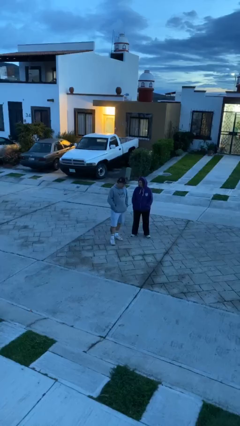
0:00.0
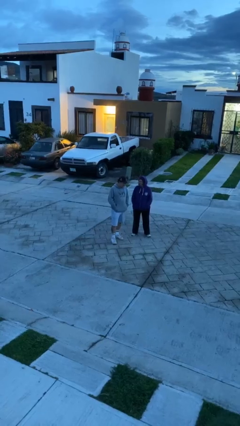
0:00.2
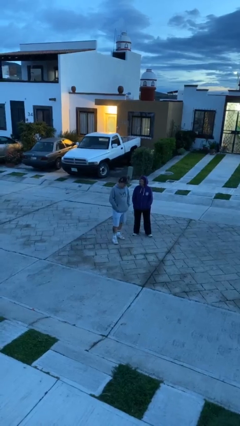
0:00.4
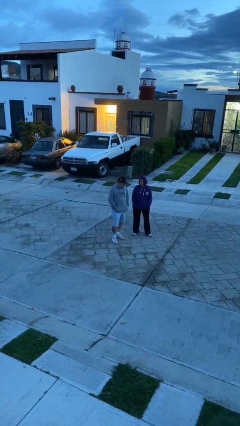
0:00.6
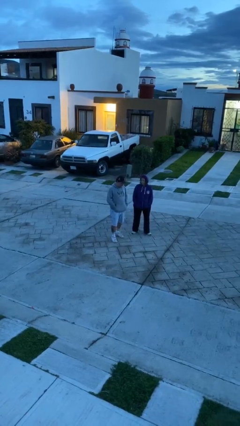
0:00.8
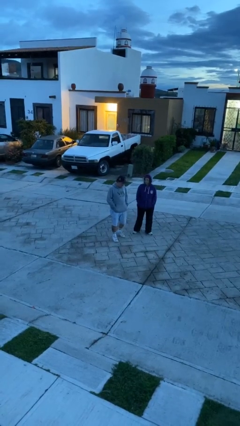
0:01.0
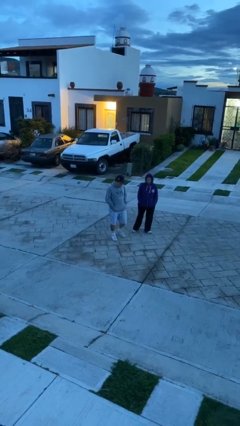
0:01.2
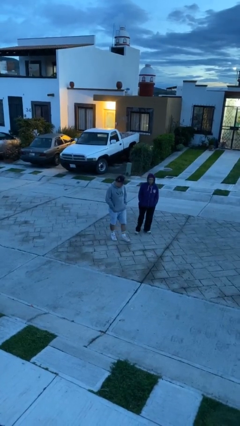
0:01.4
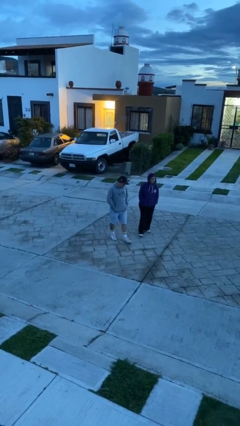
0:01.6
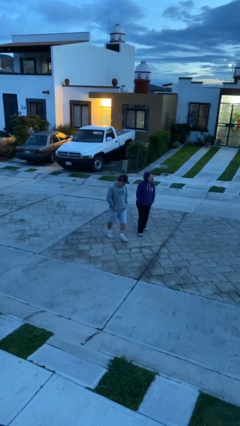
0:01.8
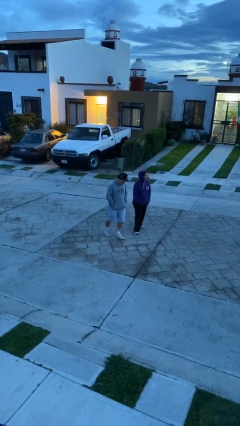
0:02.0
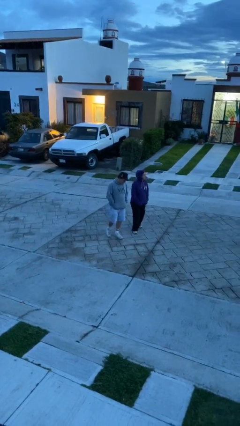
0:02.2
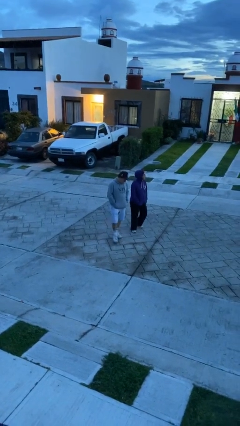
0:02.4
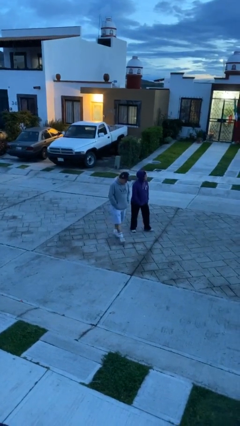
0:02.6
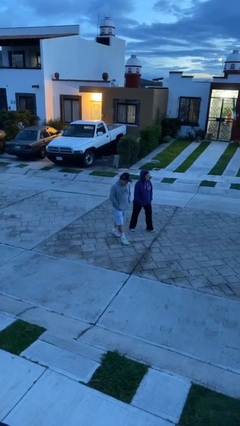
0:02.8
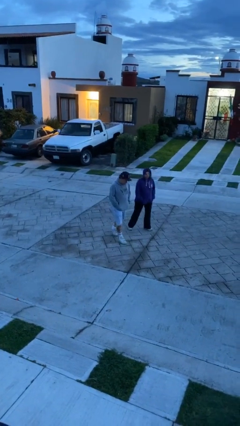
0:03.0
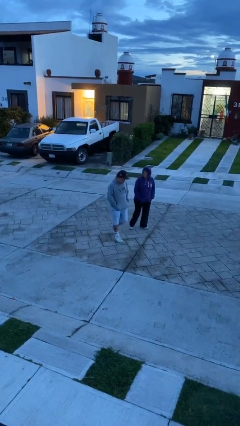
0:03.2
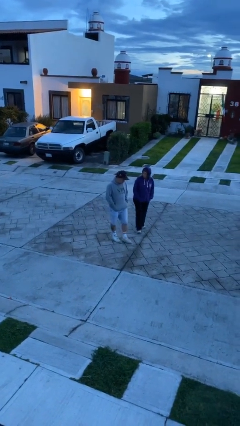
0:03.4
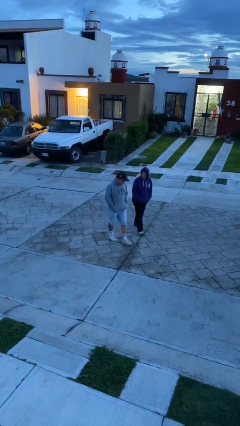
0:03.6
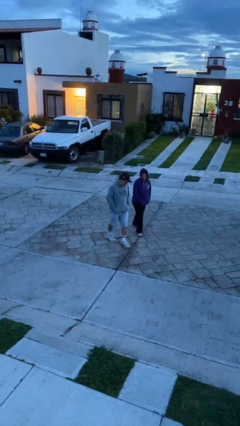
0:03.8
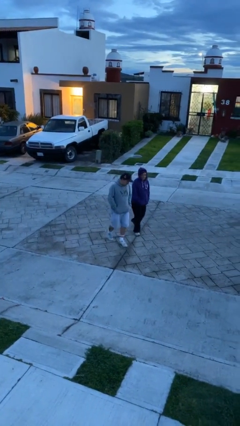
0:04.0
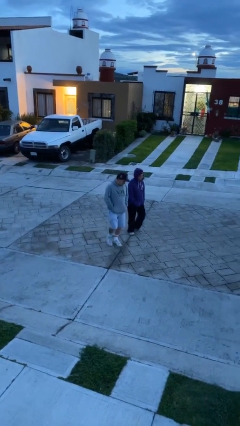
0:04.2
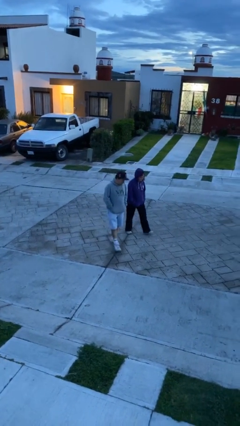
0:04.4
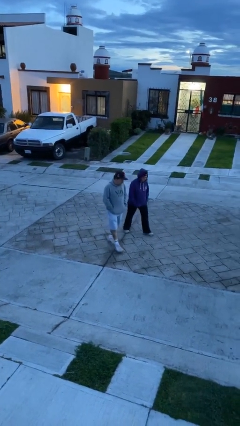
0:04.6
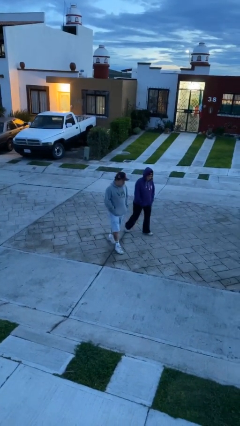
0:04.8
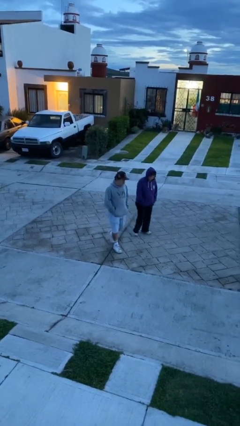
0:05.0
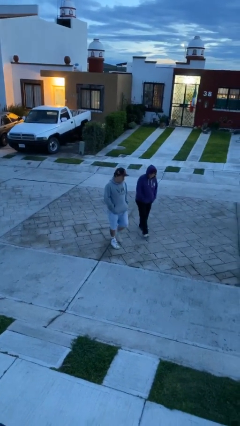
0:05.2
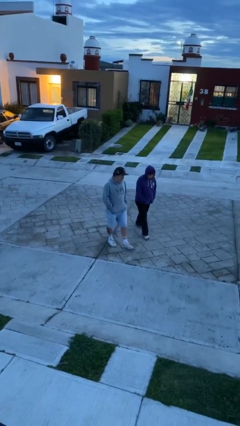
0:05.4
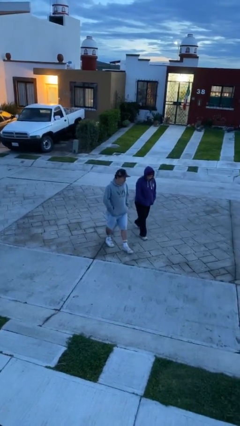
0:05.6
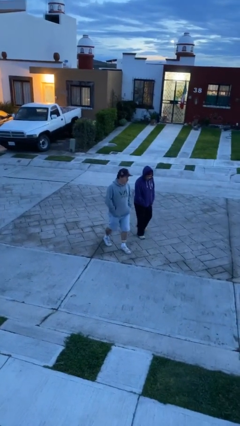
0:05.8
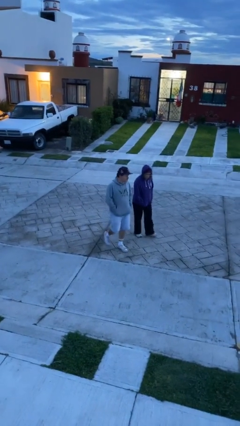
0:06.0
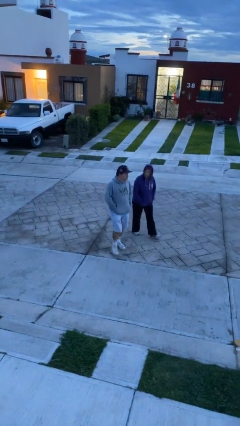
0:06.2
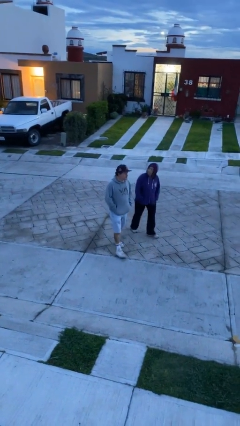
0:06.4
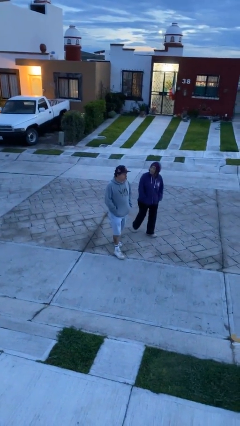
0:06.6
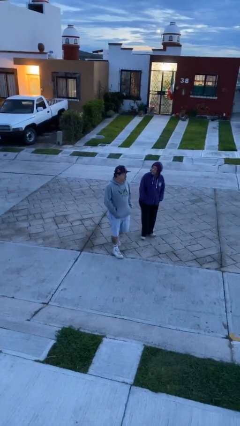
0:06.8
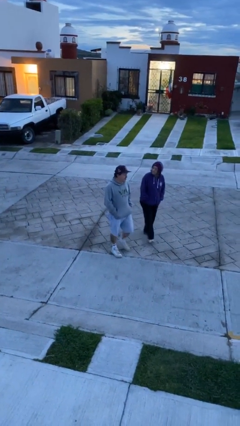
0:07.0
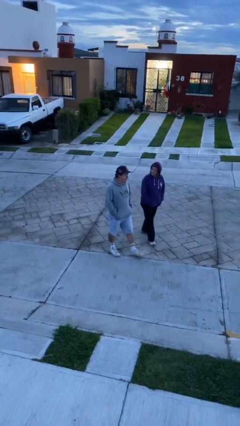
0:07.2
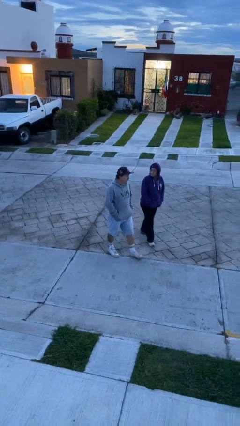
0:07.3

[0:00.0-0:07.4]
person talks to person

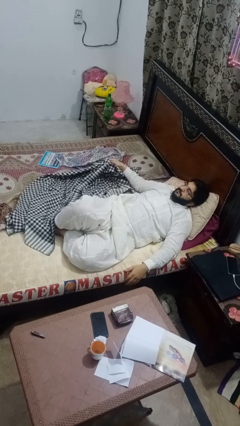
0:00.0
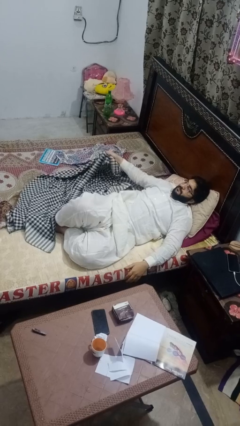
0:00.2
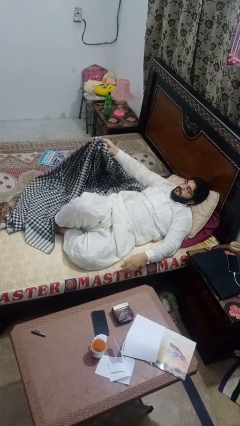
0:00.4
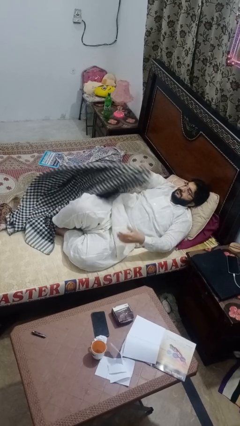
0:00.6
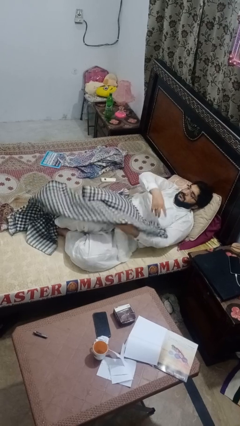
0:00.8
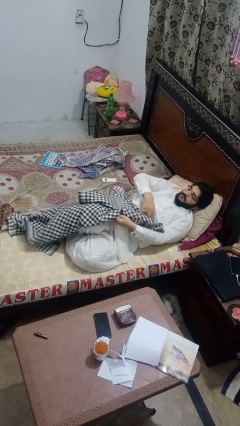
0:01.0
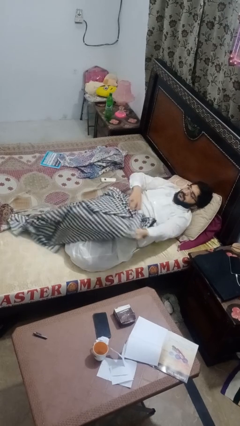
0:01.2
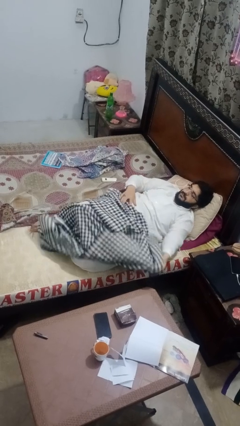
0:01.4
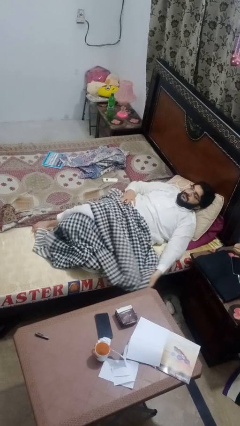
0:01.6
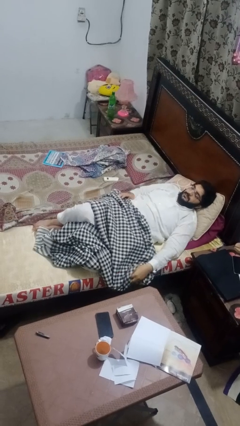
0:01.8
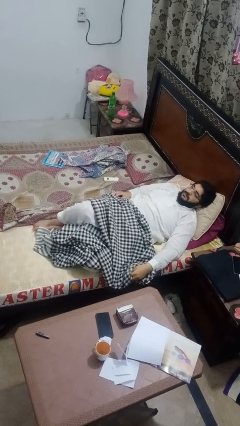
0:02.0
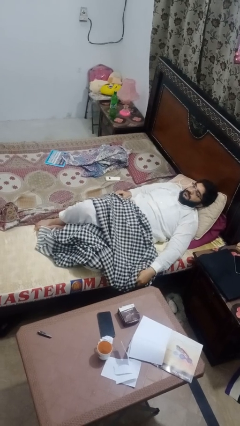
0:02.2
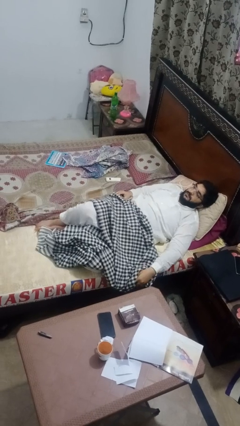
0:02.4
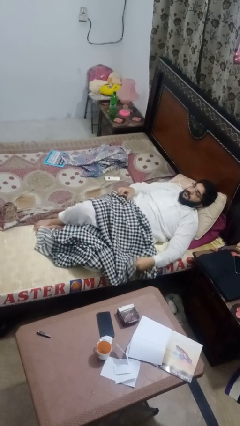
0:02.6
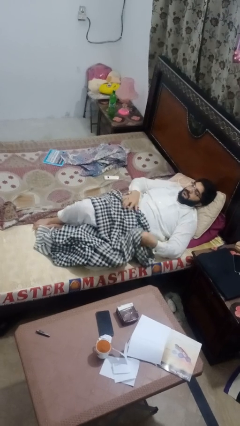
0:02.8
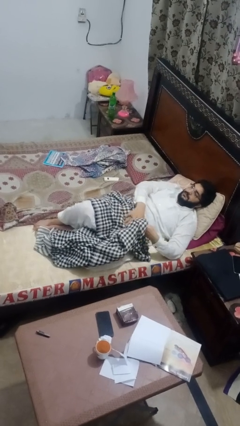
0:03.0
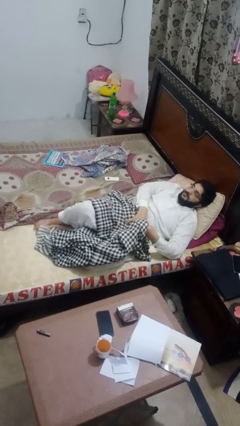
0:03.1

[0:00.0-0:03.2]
person covers with blanket

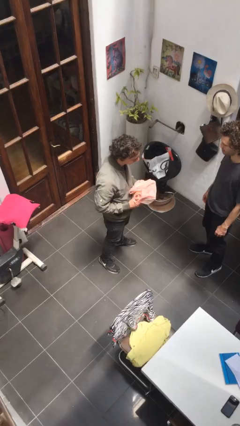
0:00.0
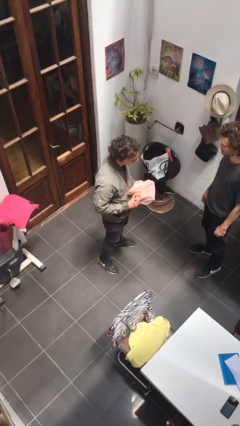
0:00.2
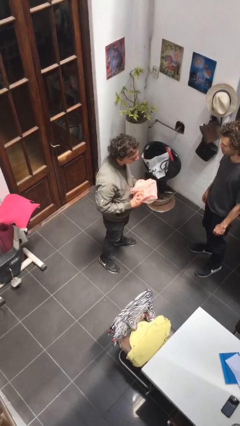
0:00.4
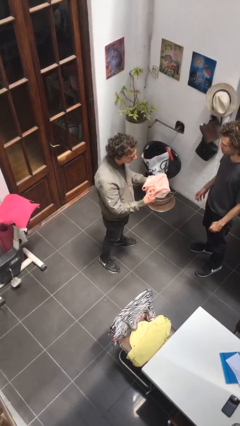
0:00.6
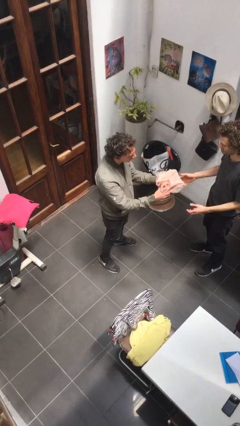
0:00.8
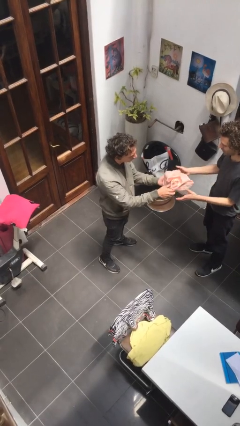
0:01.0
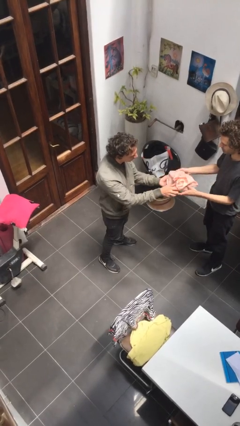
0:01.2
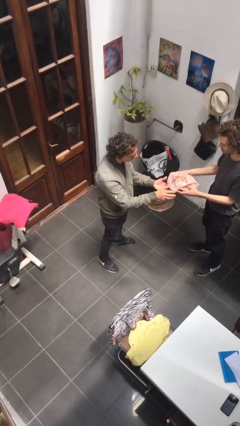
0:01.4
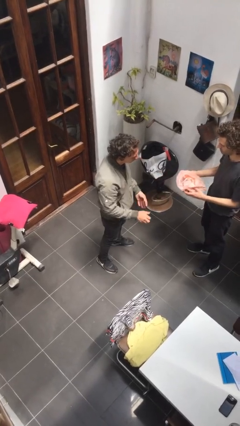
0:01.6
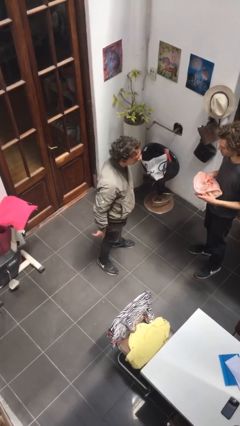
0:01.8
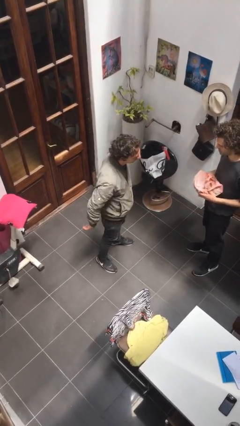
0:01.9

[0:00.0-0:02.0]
person transfers object to person

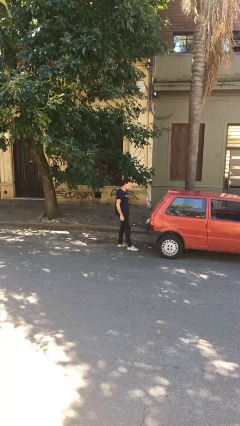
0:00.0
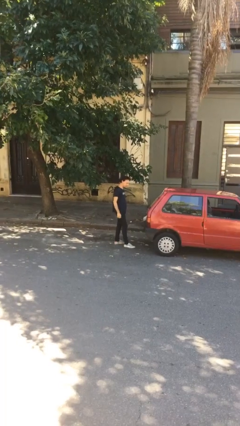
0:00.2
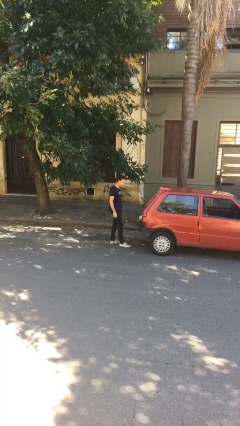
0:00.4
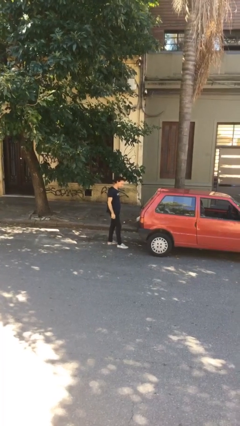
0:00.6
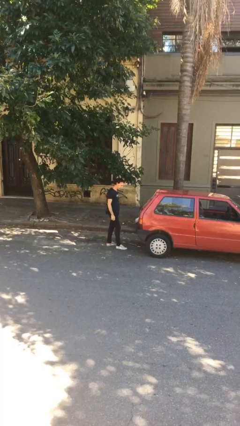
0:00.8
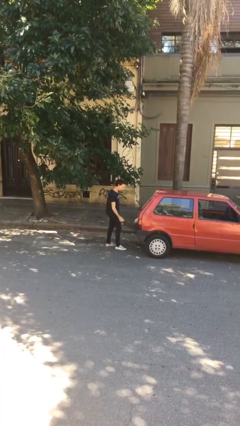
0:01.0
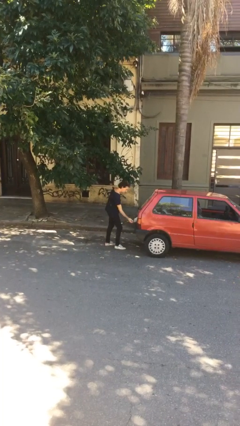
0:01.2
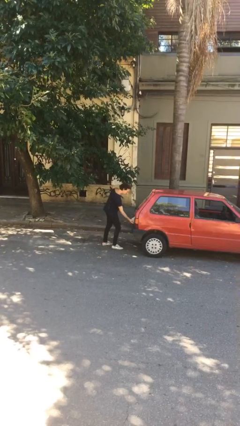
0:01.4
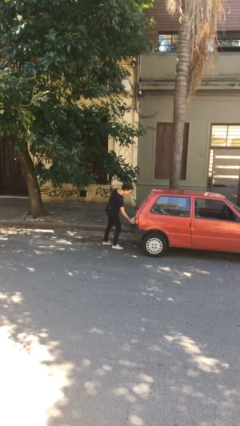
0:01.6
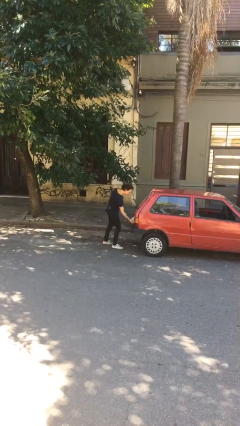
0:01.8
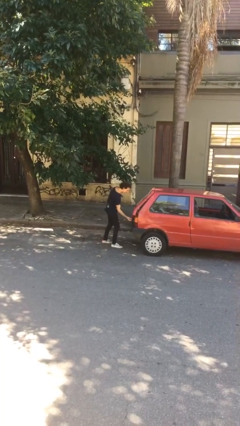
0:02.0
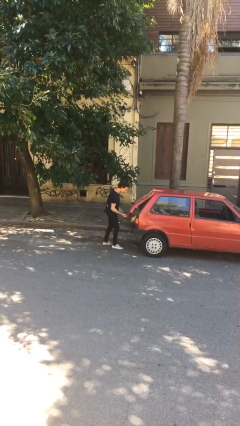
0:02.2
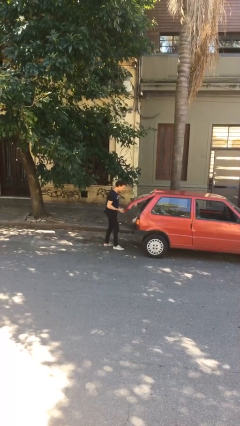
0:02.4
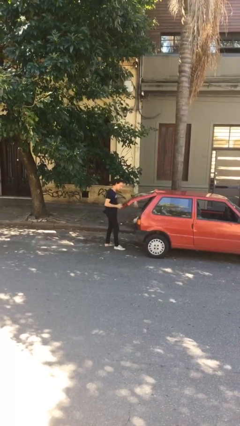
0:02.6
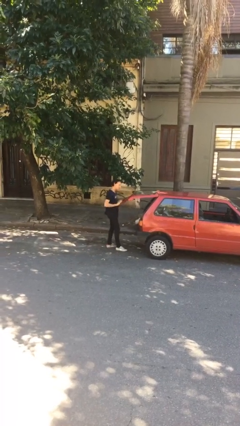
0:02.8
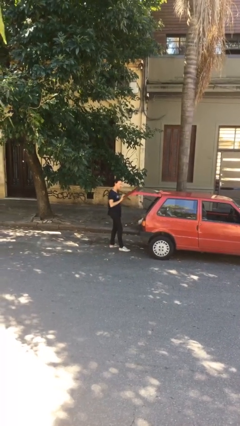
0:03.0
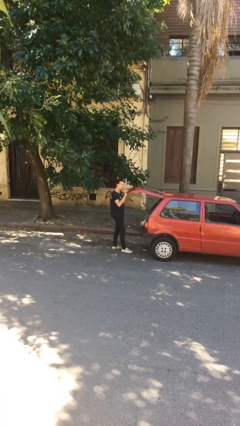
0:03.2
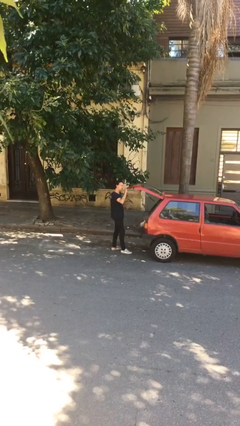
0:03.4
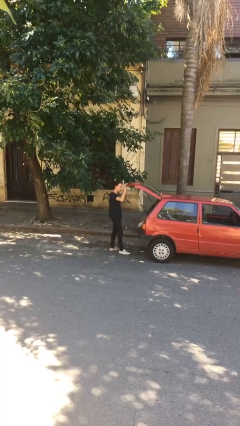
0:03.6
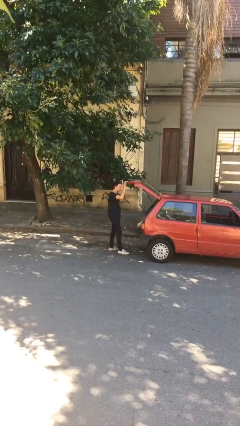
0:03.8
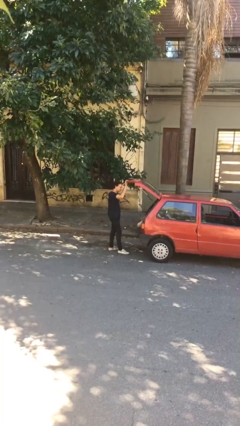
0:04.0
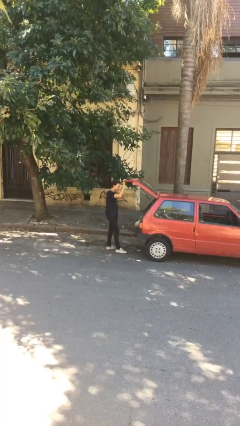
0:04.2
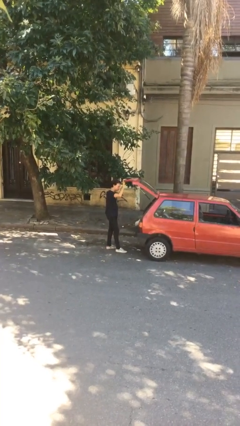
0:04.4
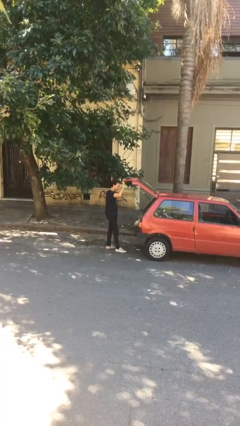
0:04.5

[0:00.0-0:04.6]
person opens car trunk

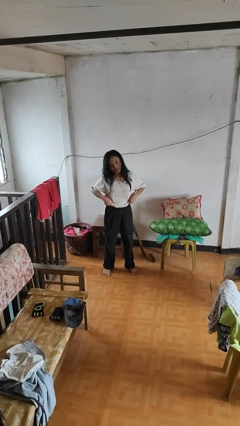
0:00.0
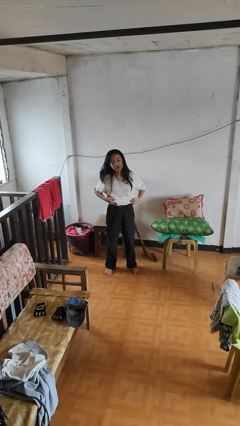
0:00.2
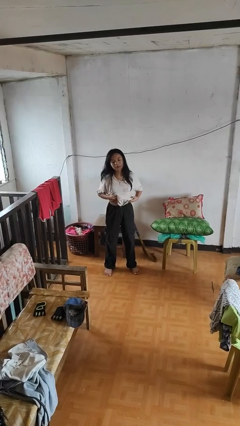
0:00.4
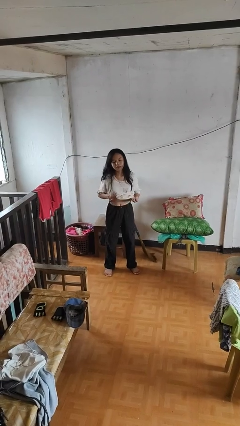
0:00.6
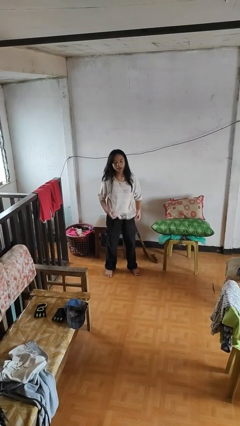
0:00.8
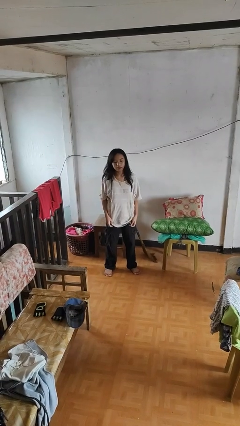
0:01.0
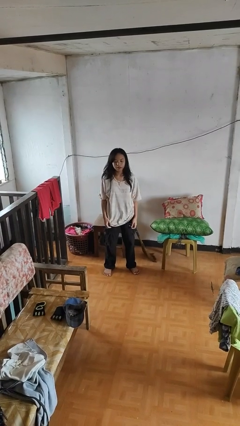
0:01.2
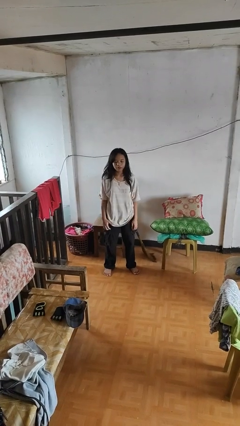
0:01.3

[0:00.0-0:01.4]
person untucks shirt
